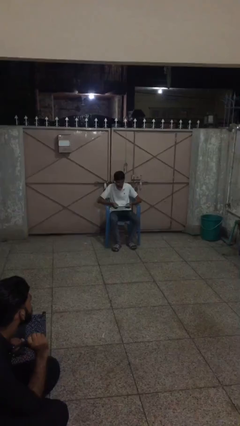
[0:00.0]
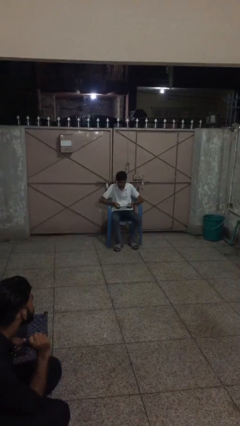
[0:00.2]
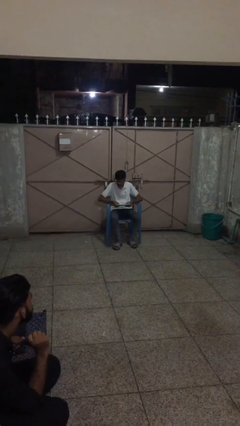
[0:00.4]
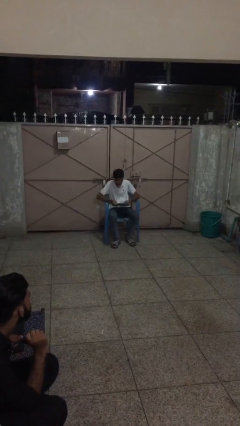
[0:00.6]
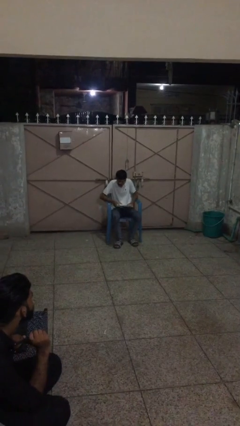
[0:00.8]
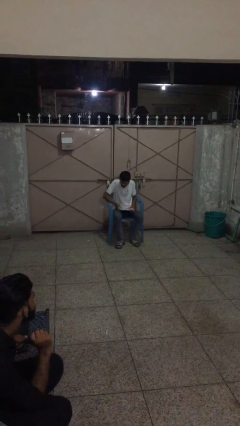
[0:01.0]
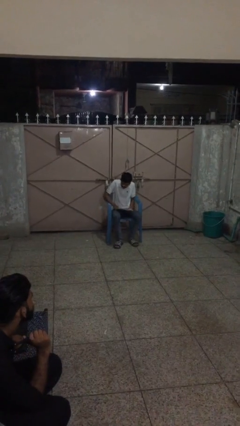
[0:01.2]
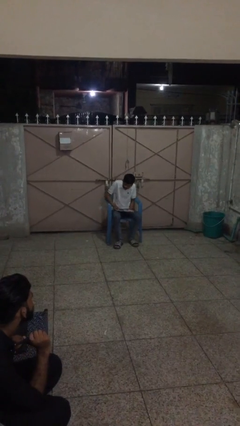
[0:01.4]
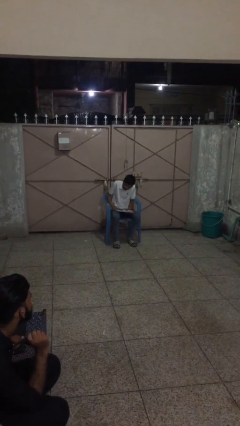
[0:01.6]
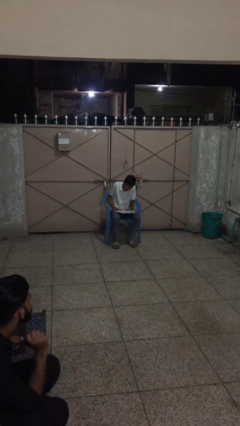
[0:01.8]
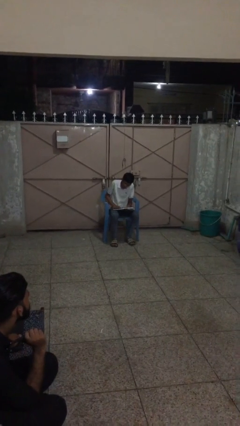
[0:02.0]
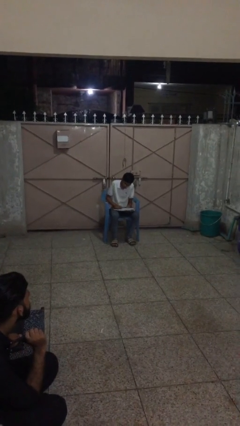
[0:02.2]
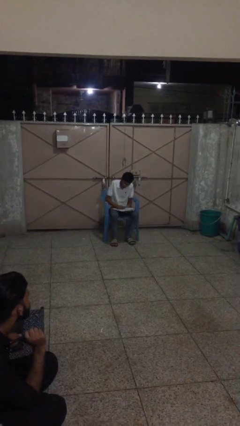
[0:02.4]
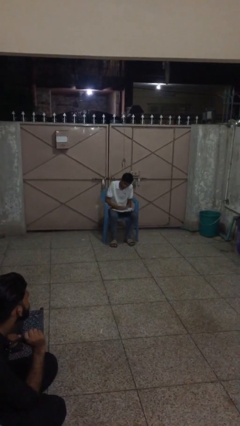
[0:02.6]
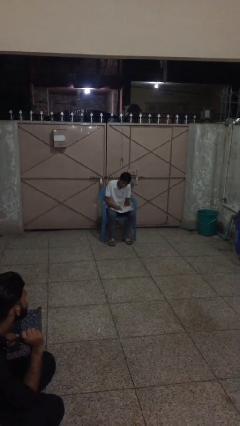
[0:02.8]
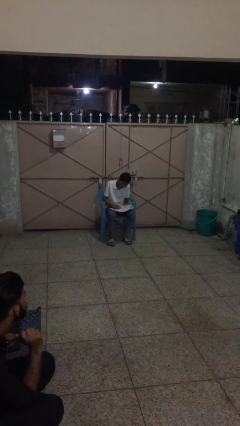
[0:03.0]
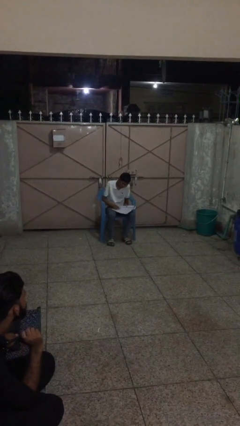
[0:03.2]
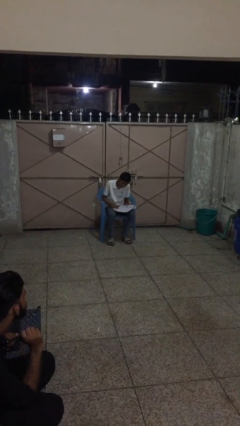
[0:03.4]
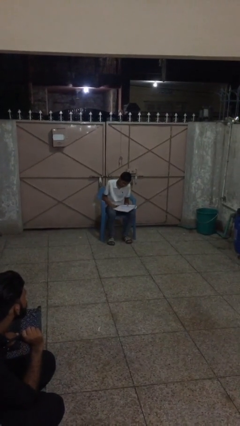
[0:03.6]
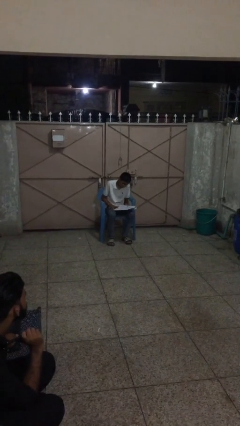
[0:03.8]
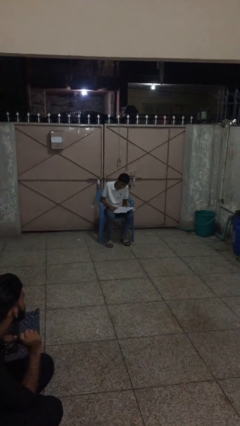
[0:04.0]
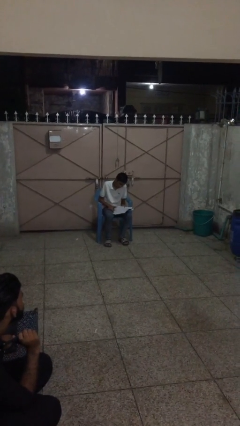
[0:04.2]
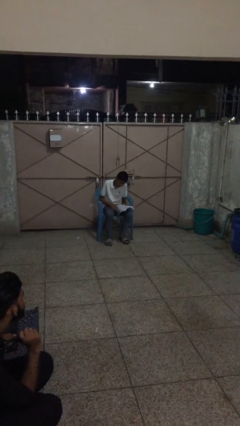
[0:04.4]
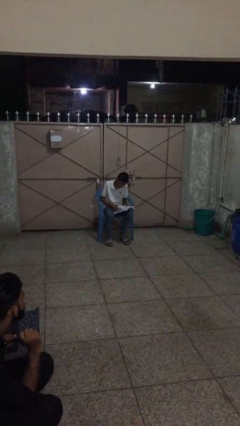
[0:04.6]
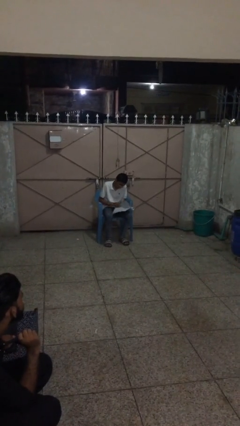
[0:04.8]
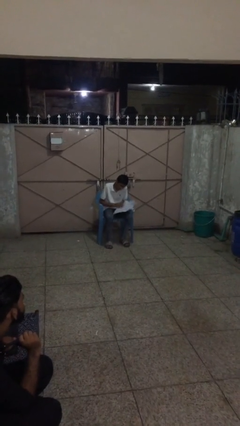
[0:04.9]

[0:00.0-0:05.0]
person reads document

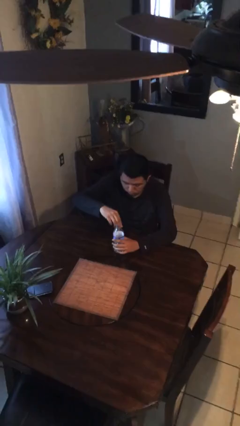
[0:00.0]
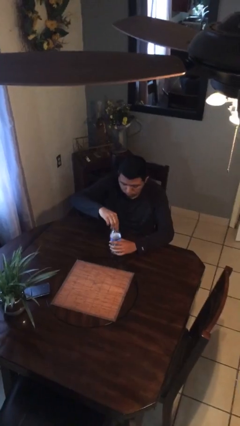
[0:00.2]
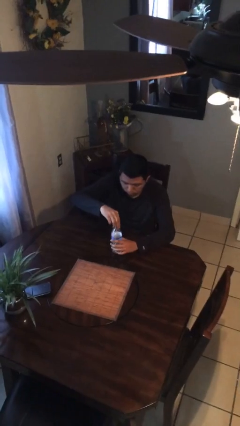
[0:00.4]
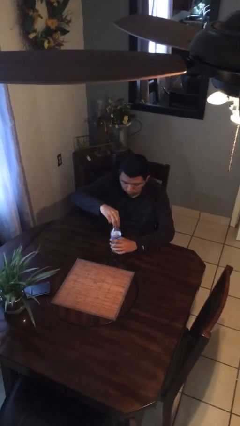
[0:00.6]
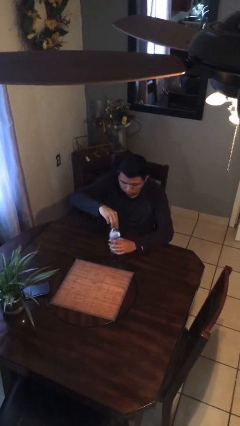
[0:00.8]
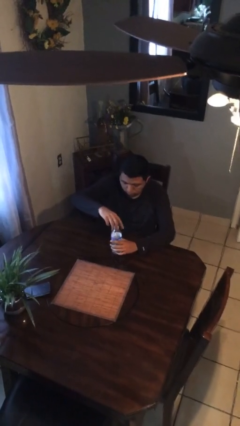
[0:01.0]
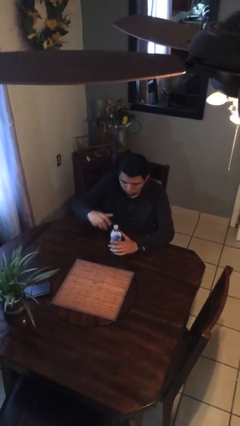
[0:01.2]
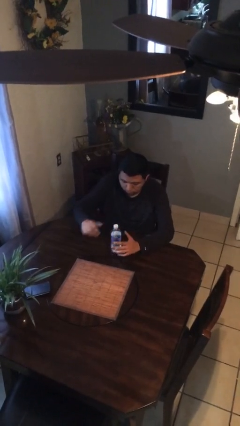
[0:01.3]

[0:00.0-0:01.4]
person screws lid to bottle

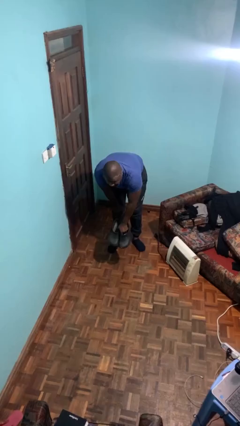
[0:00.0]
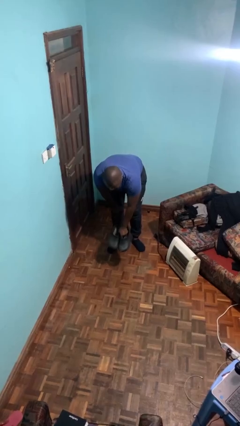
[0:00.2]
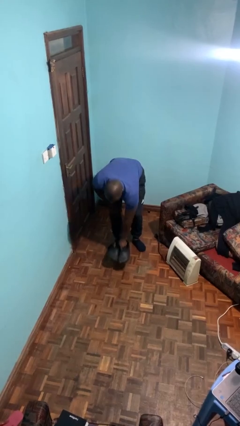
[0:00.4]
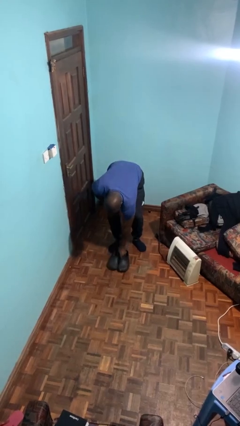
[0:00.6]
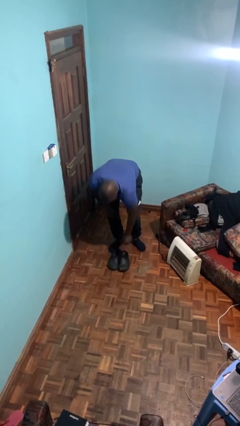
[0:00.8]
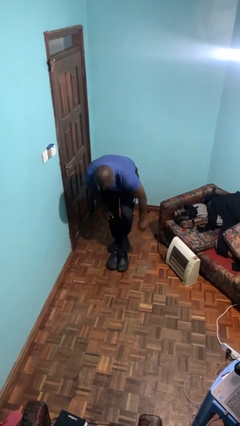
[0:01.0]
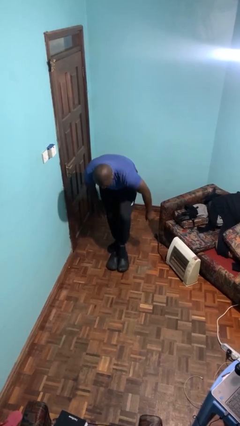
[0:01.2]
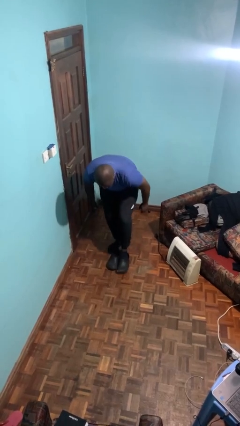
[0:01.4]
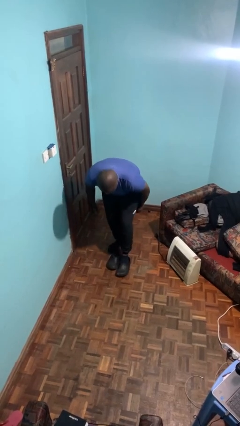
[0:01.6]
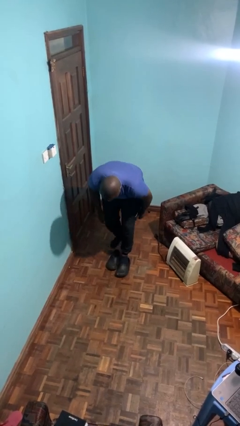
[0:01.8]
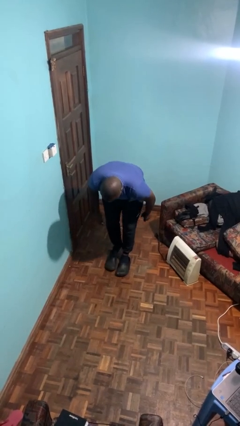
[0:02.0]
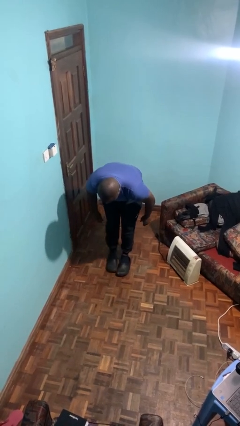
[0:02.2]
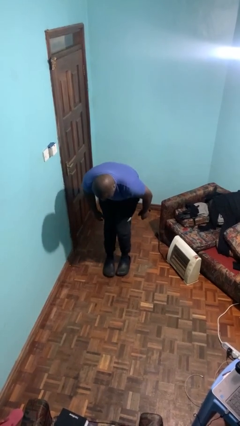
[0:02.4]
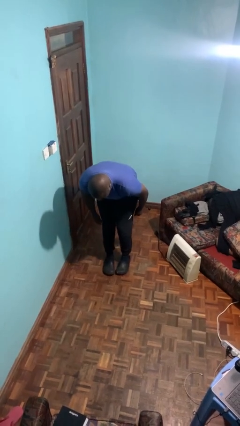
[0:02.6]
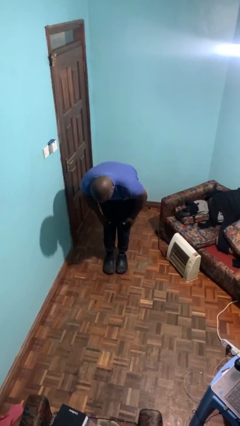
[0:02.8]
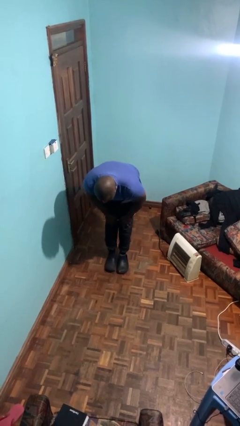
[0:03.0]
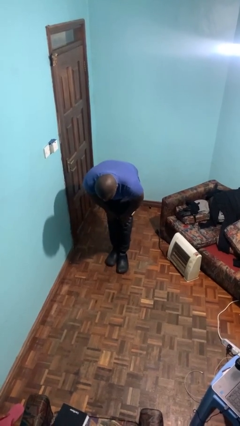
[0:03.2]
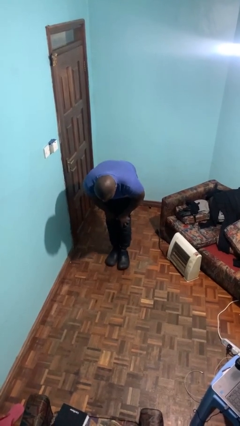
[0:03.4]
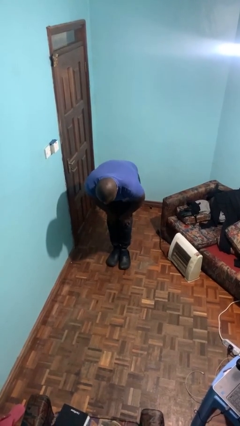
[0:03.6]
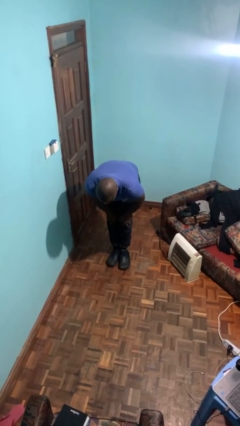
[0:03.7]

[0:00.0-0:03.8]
person puts on shoes

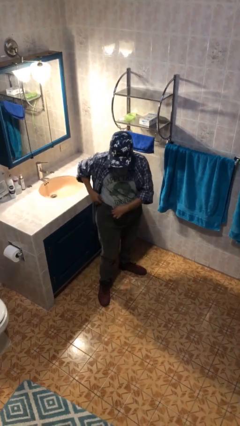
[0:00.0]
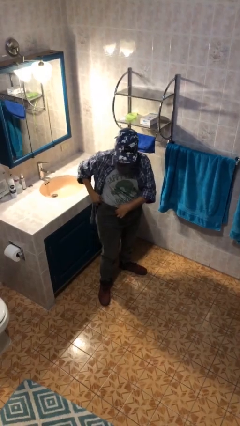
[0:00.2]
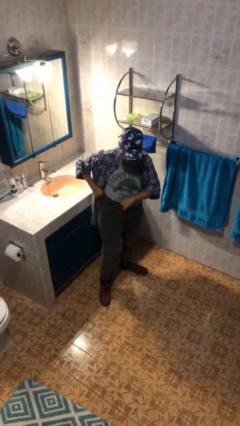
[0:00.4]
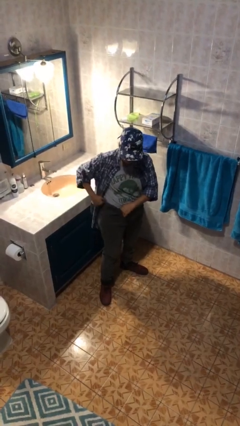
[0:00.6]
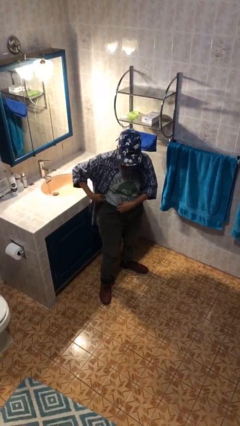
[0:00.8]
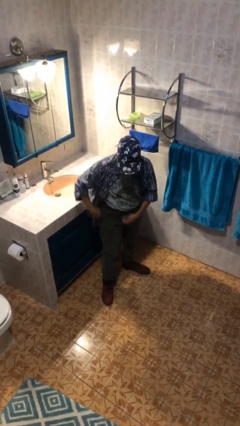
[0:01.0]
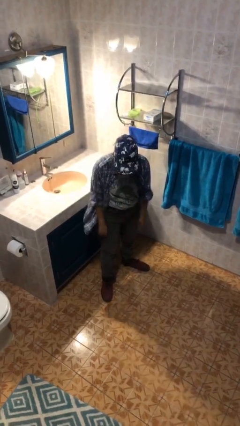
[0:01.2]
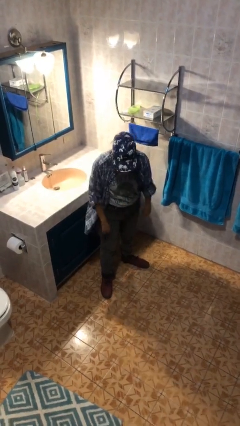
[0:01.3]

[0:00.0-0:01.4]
person hikes up pants

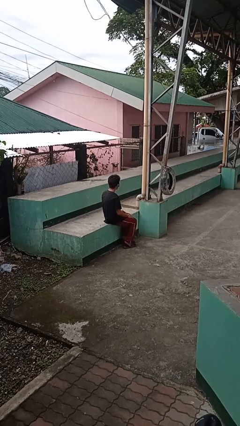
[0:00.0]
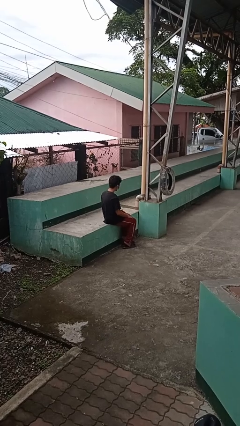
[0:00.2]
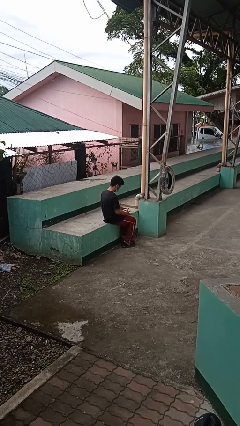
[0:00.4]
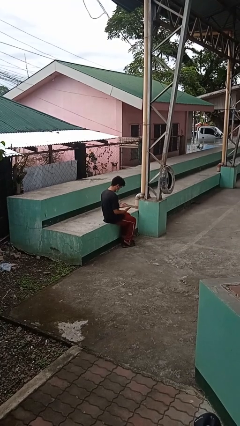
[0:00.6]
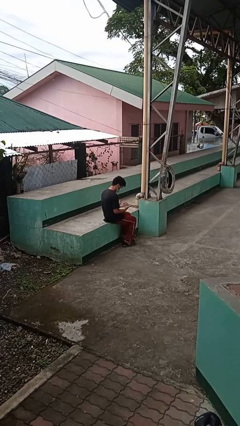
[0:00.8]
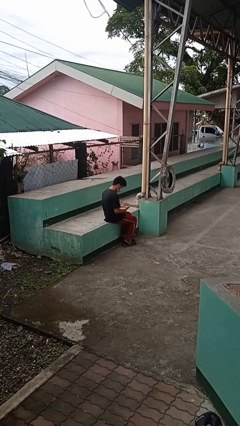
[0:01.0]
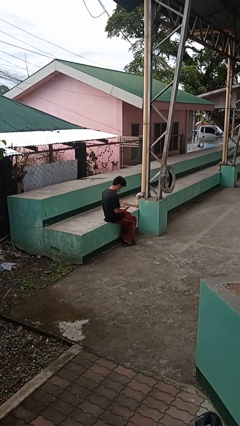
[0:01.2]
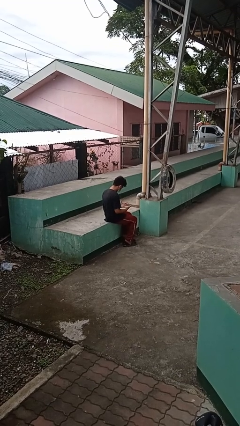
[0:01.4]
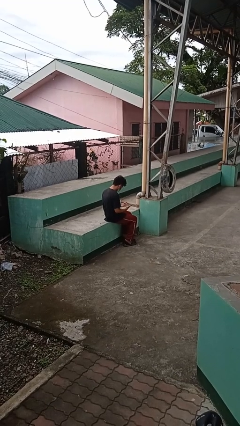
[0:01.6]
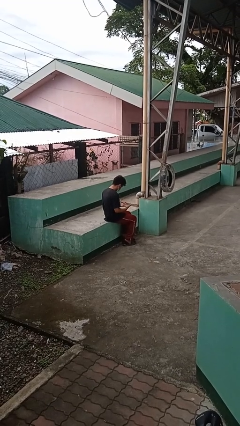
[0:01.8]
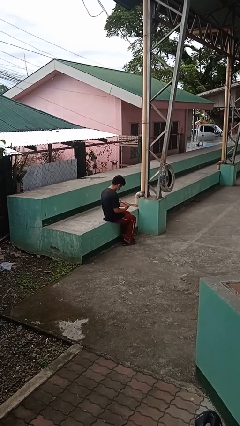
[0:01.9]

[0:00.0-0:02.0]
person looks at hands in lap

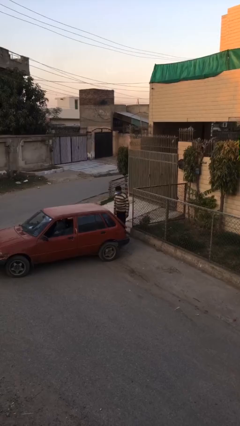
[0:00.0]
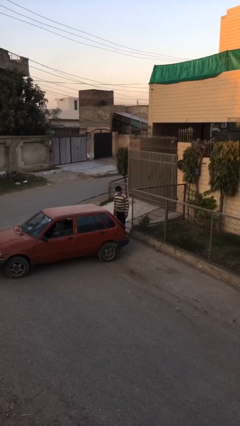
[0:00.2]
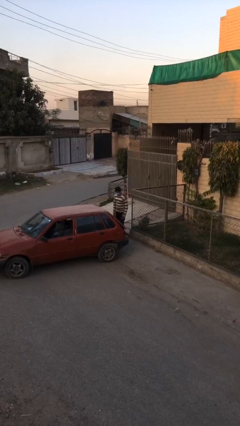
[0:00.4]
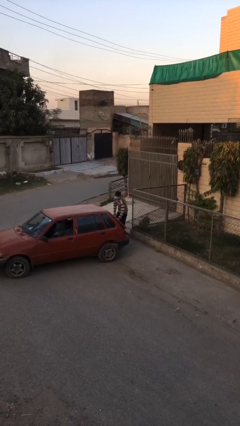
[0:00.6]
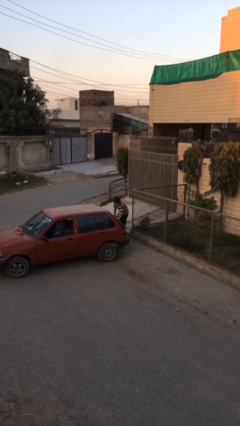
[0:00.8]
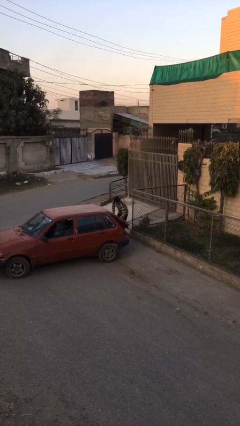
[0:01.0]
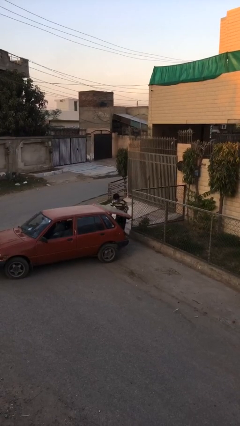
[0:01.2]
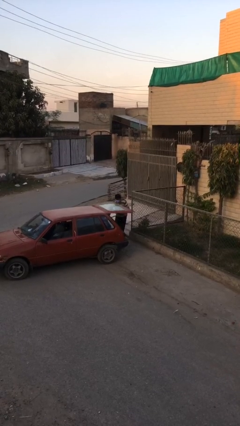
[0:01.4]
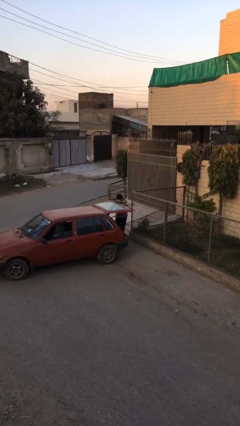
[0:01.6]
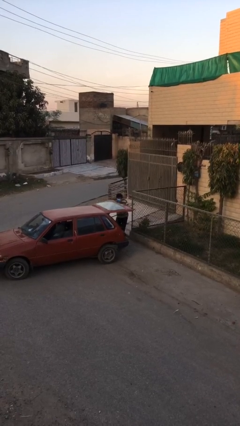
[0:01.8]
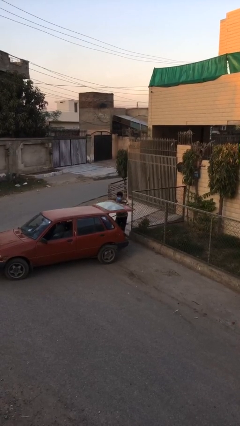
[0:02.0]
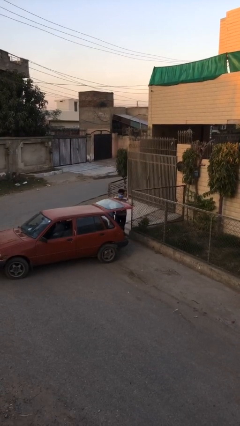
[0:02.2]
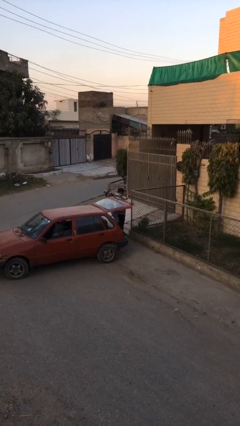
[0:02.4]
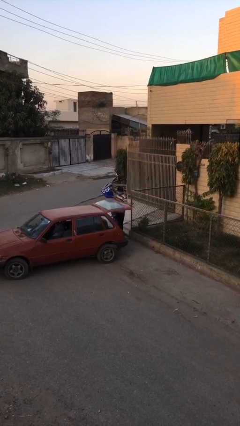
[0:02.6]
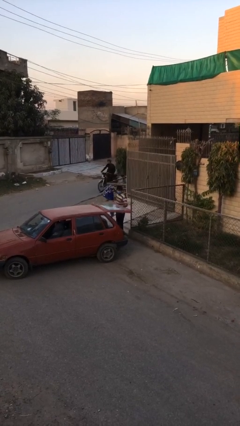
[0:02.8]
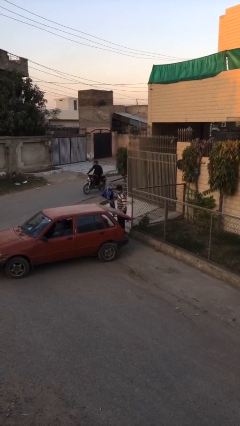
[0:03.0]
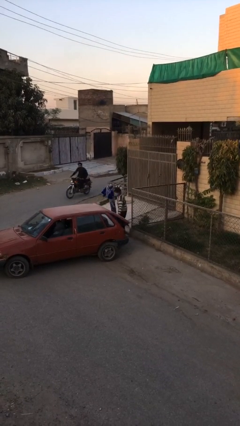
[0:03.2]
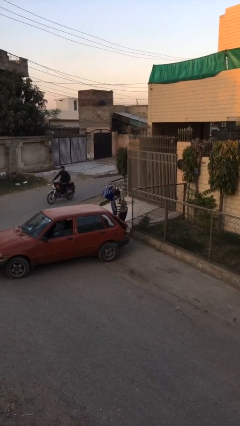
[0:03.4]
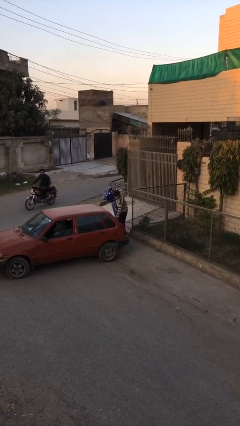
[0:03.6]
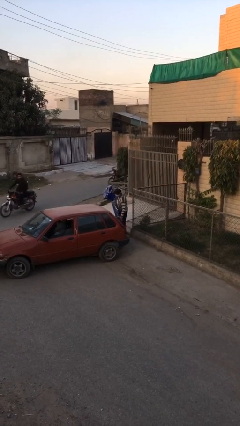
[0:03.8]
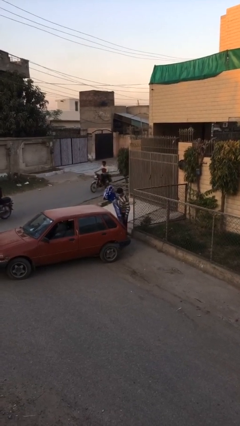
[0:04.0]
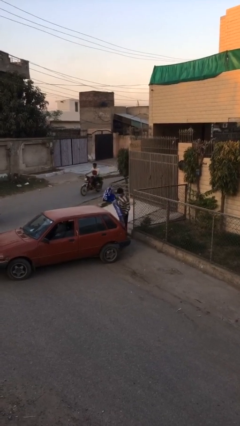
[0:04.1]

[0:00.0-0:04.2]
person unloads car
